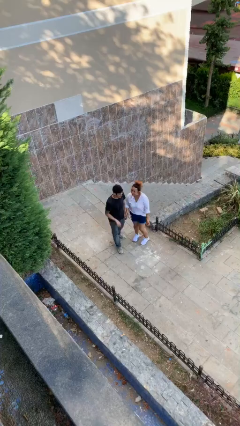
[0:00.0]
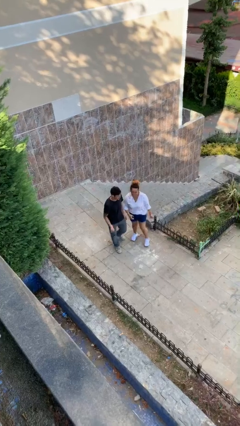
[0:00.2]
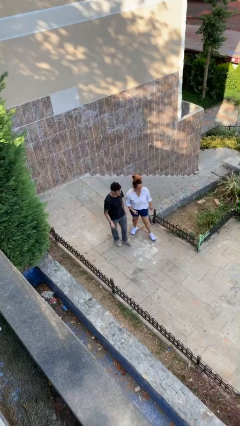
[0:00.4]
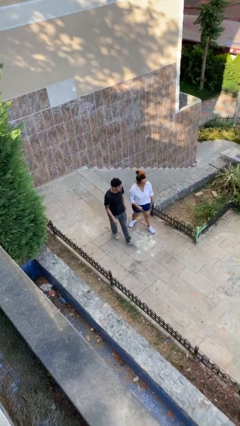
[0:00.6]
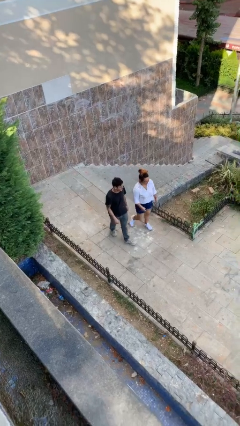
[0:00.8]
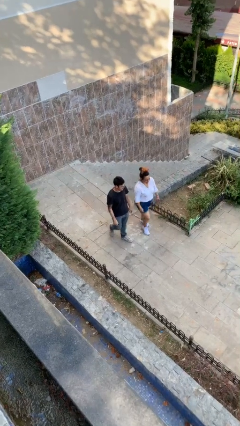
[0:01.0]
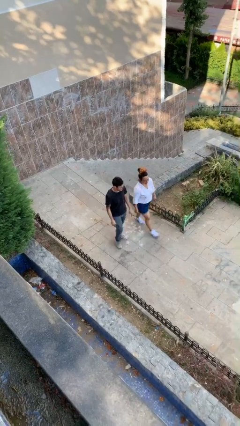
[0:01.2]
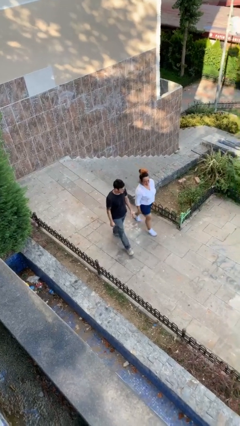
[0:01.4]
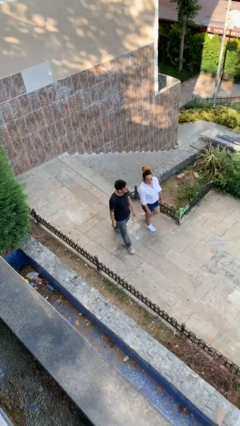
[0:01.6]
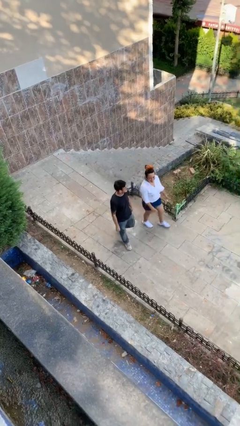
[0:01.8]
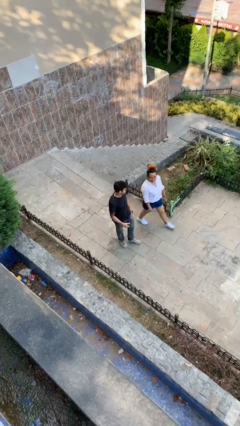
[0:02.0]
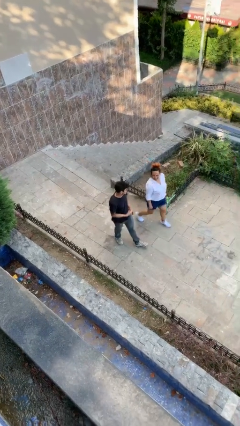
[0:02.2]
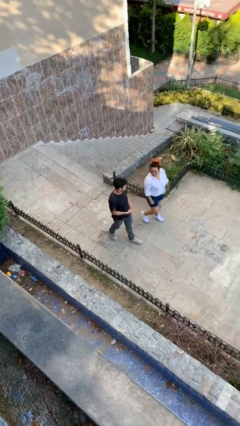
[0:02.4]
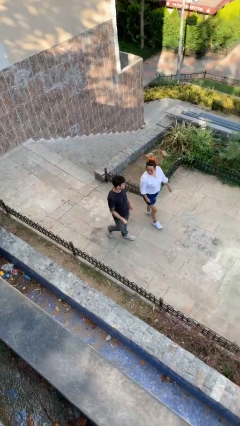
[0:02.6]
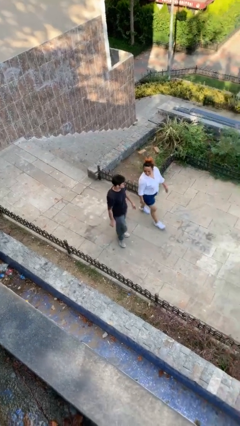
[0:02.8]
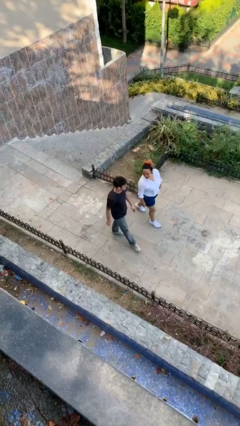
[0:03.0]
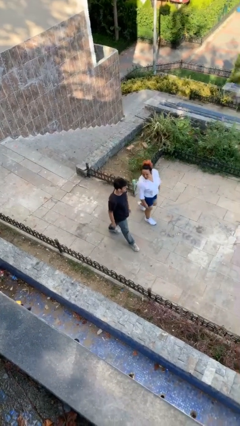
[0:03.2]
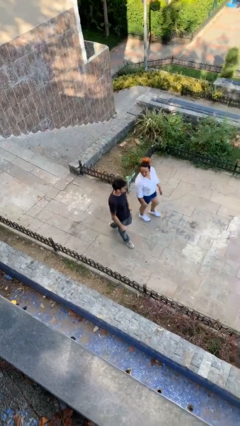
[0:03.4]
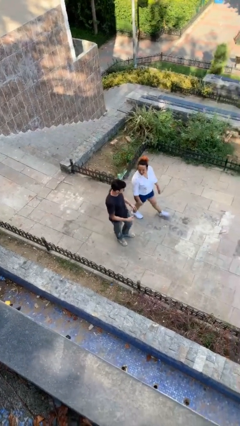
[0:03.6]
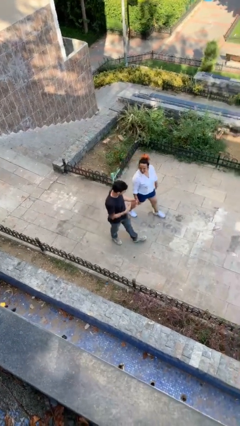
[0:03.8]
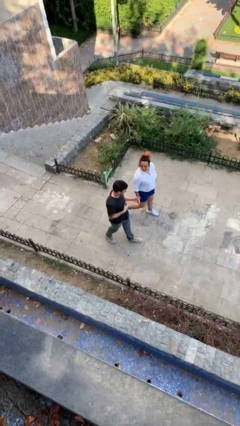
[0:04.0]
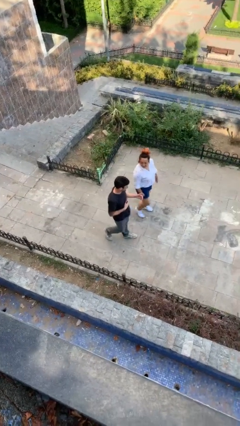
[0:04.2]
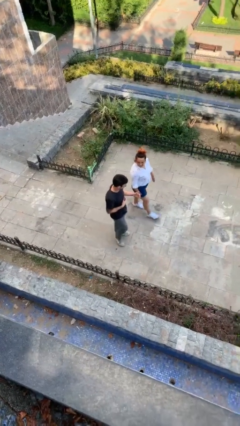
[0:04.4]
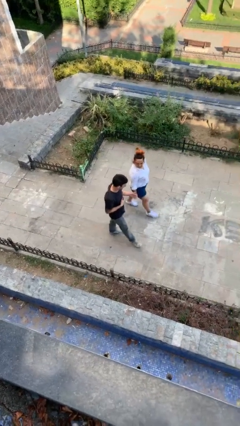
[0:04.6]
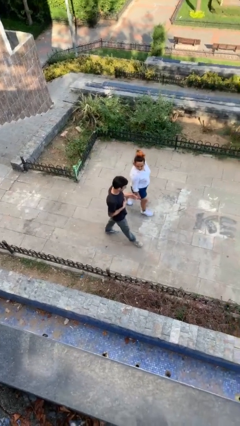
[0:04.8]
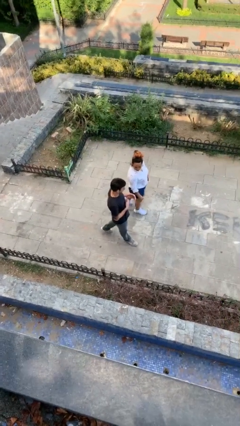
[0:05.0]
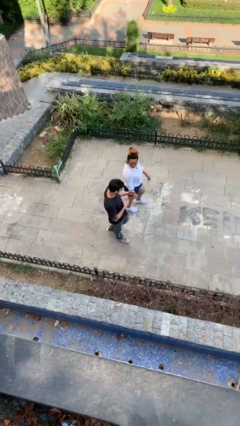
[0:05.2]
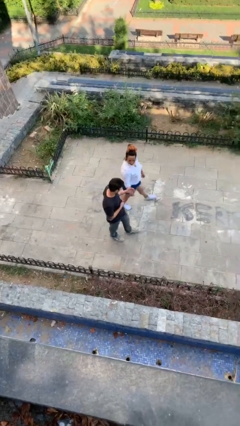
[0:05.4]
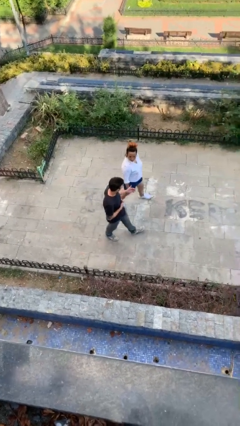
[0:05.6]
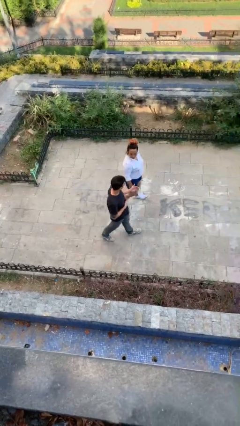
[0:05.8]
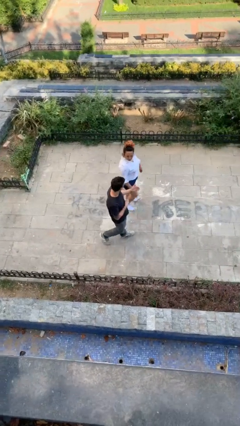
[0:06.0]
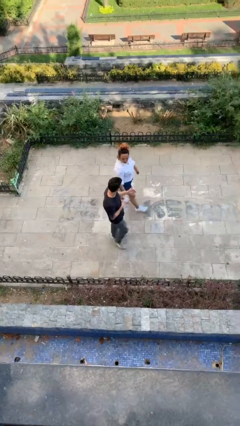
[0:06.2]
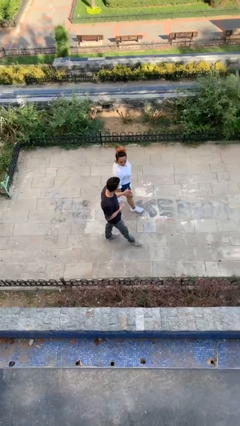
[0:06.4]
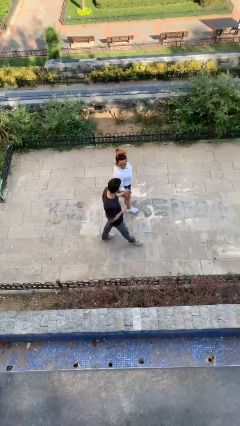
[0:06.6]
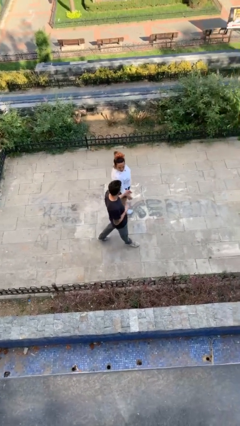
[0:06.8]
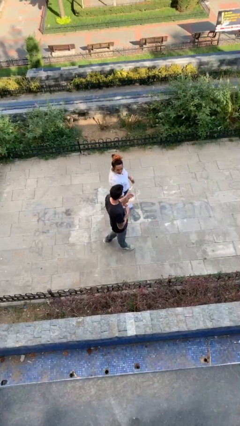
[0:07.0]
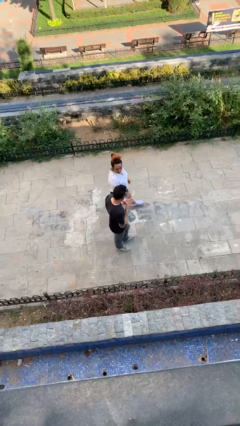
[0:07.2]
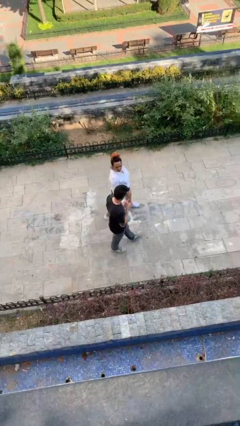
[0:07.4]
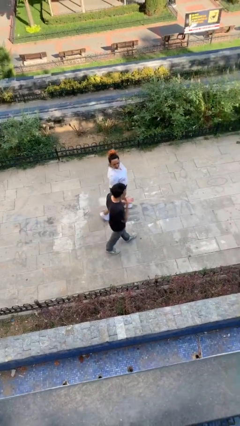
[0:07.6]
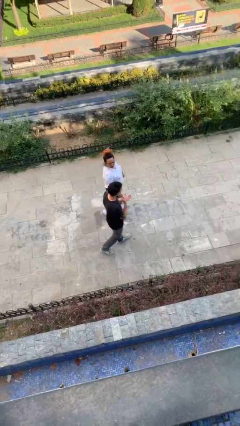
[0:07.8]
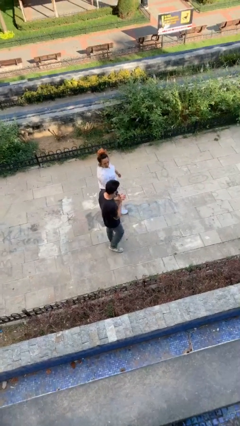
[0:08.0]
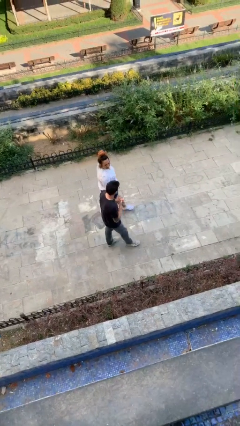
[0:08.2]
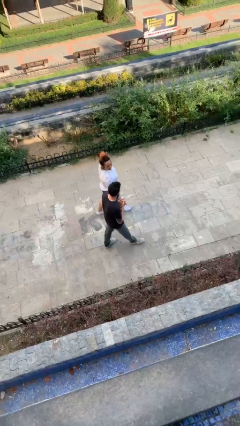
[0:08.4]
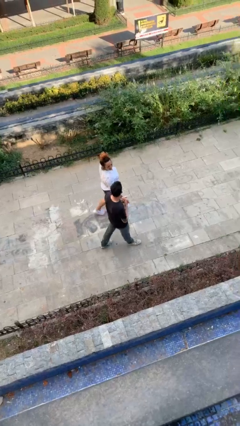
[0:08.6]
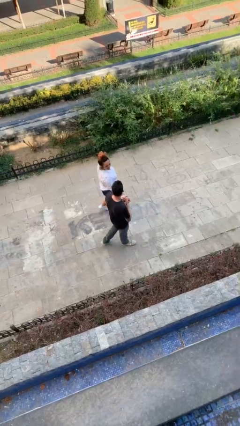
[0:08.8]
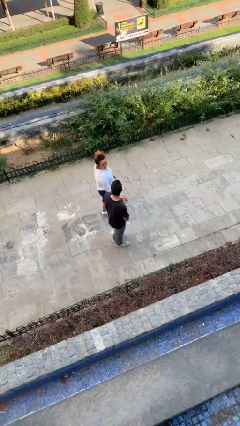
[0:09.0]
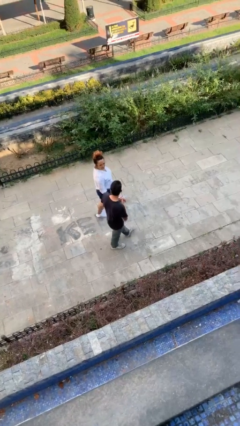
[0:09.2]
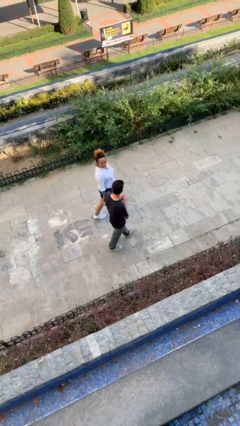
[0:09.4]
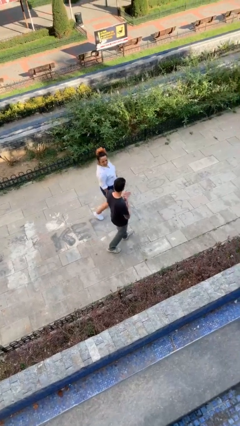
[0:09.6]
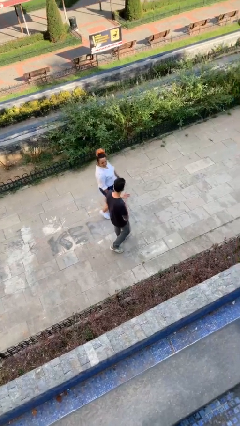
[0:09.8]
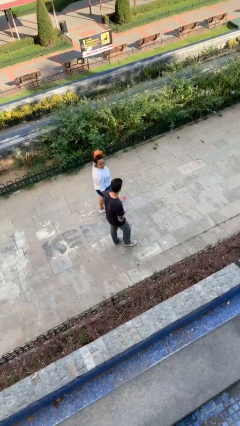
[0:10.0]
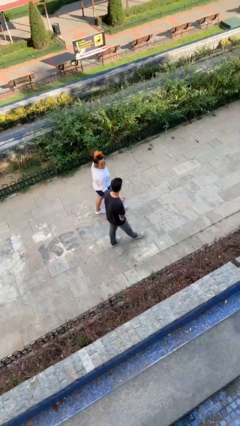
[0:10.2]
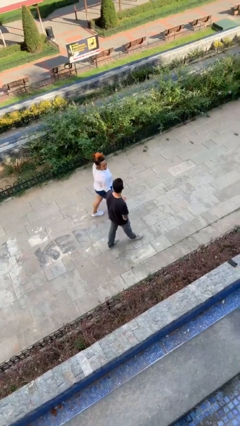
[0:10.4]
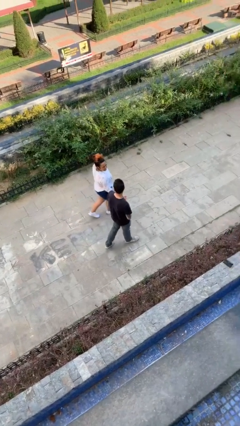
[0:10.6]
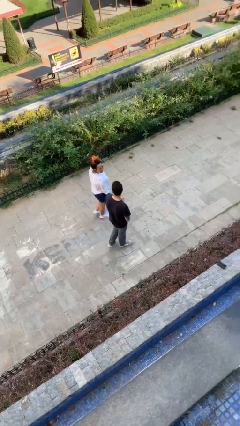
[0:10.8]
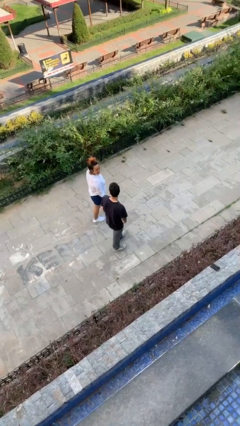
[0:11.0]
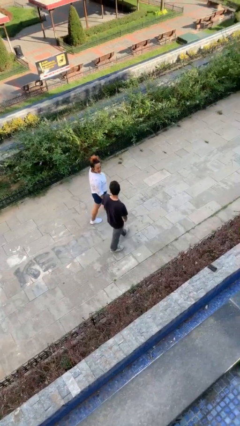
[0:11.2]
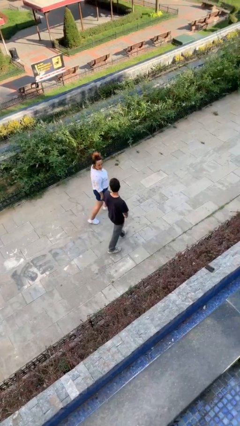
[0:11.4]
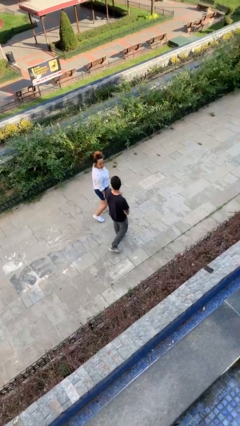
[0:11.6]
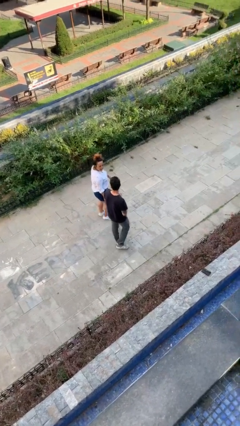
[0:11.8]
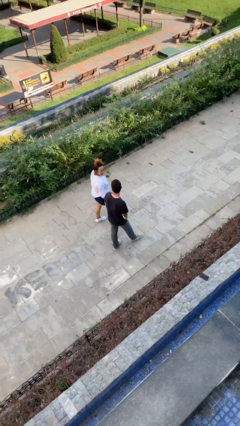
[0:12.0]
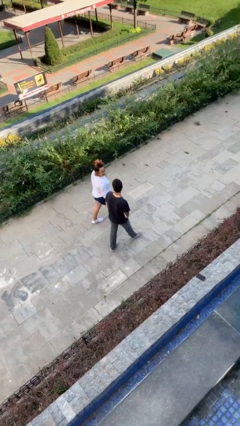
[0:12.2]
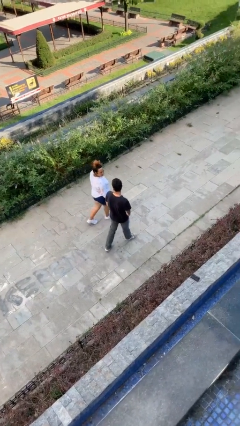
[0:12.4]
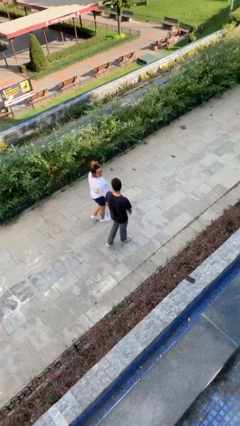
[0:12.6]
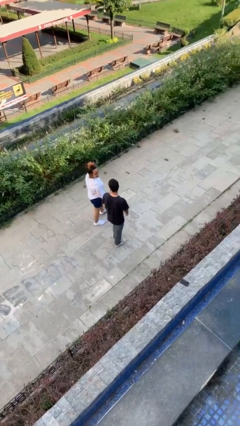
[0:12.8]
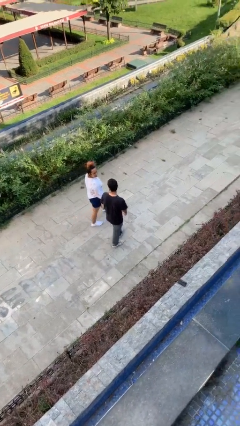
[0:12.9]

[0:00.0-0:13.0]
person talks to person

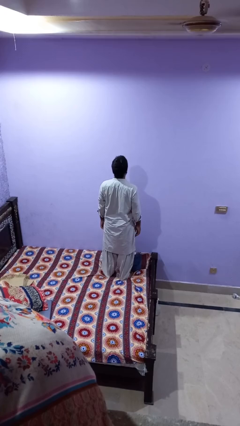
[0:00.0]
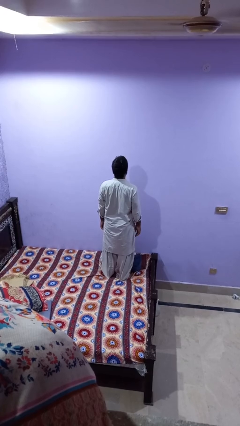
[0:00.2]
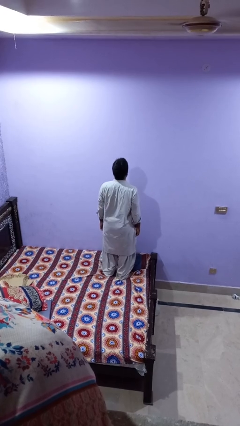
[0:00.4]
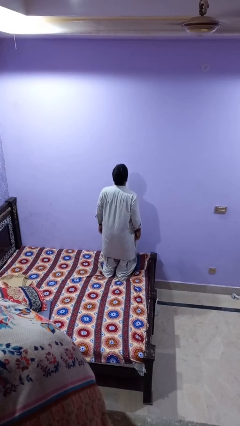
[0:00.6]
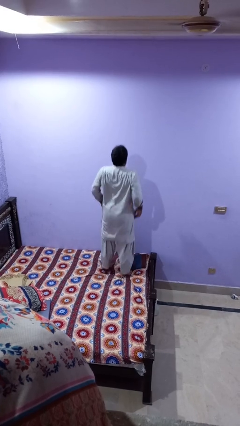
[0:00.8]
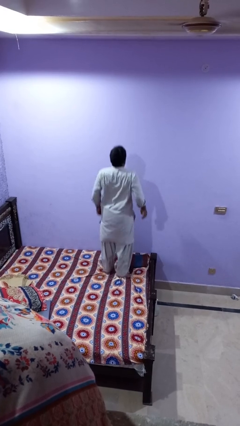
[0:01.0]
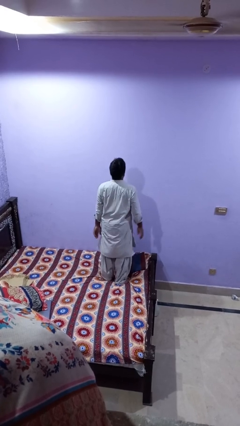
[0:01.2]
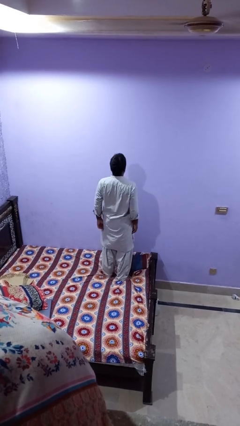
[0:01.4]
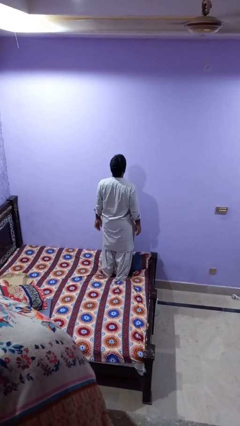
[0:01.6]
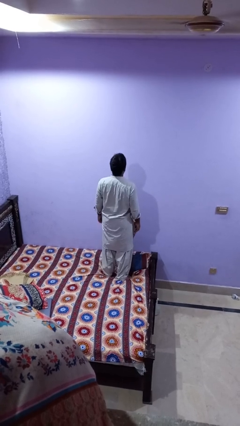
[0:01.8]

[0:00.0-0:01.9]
person jumps on bed

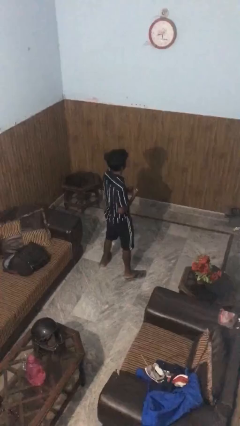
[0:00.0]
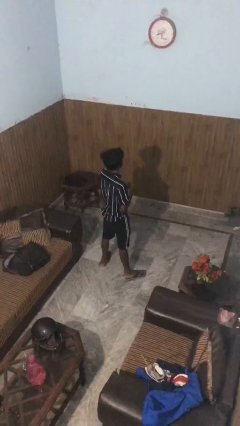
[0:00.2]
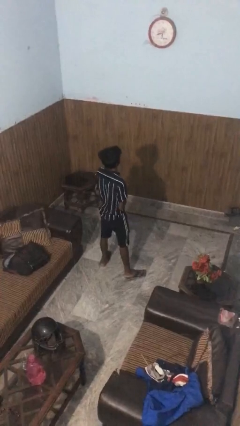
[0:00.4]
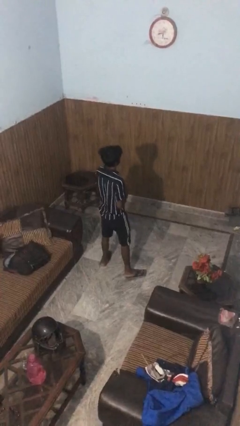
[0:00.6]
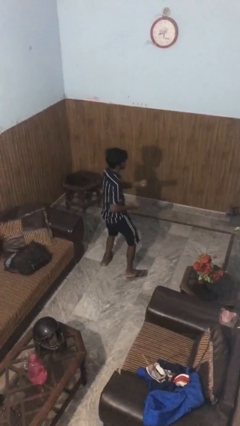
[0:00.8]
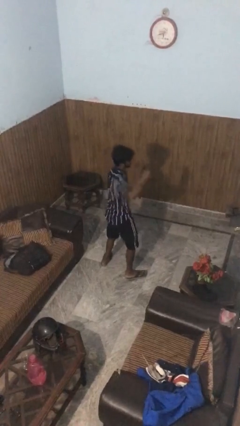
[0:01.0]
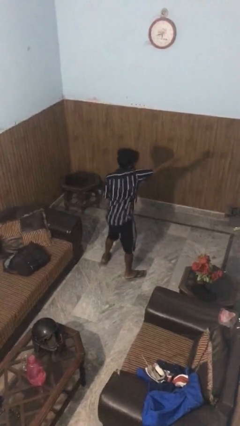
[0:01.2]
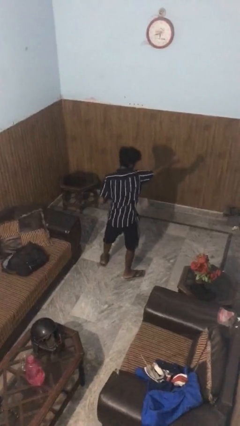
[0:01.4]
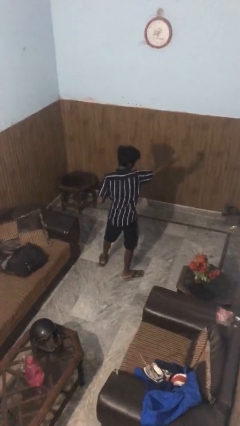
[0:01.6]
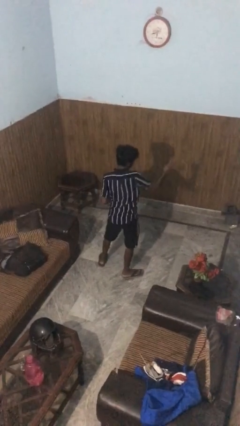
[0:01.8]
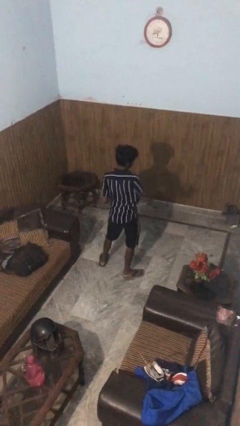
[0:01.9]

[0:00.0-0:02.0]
person punches

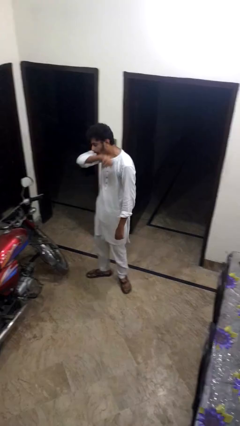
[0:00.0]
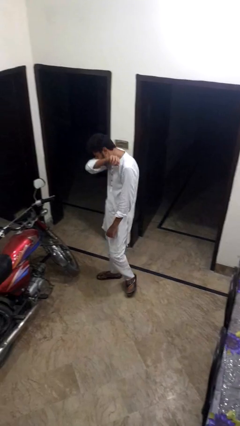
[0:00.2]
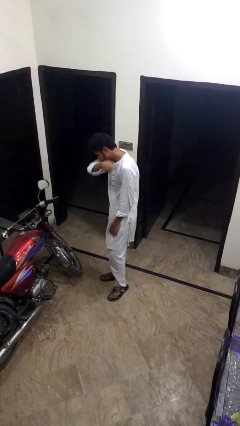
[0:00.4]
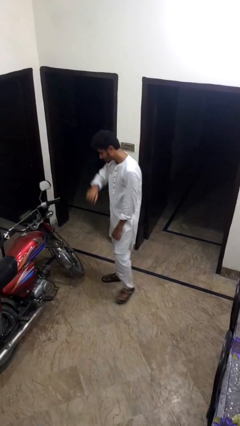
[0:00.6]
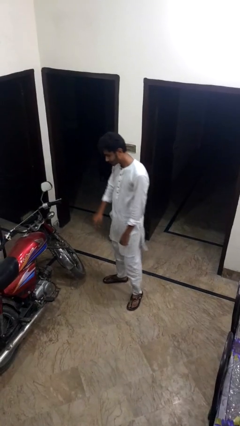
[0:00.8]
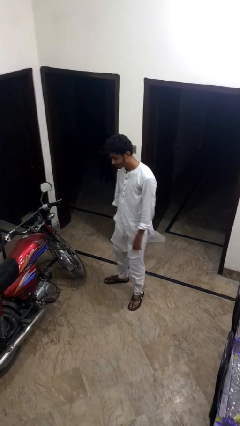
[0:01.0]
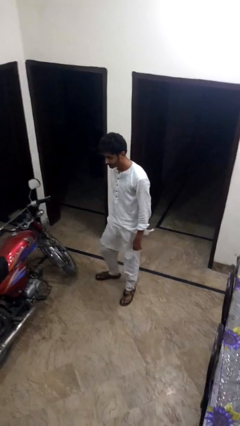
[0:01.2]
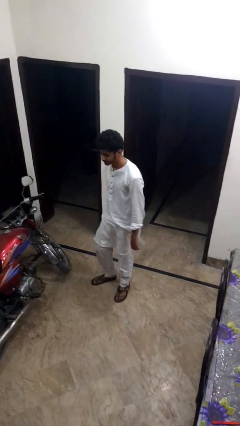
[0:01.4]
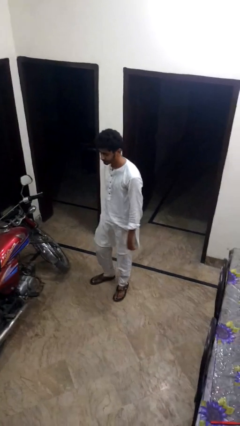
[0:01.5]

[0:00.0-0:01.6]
person sneezes into arm
